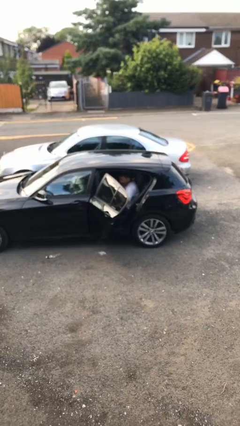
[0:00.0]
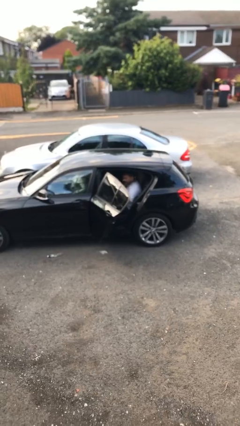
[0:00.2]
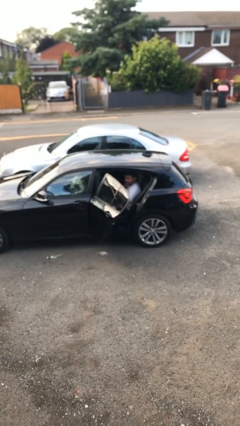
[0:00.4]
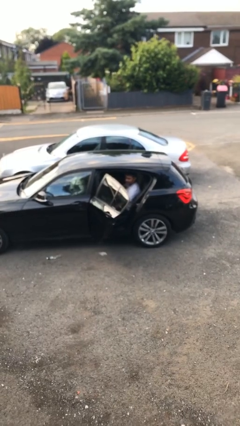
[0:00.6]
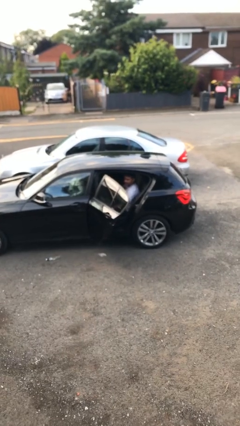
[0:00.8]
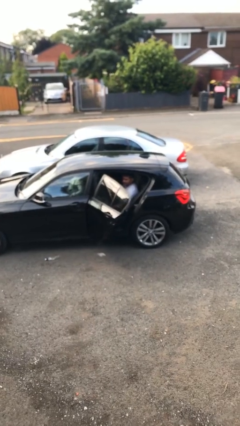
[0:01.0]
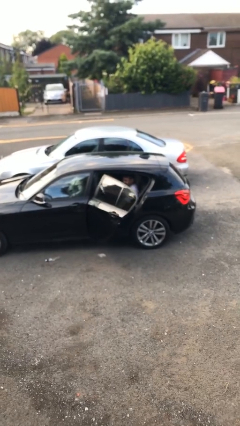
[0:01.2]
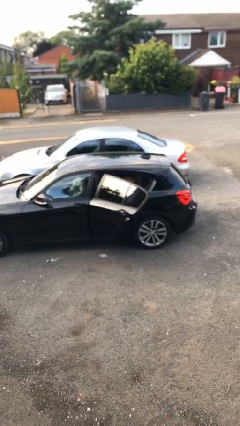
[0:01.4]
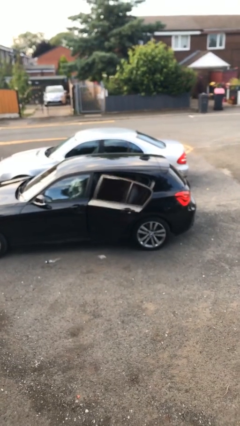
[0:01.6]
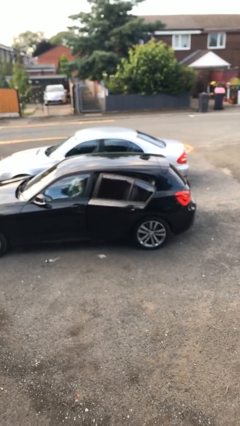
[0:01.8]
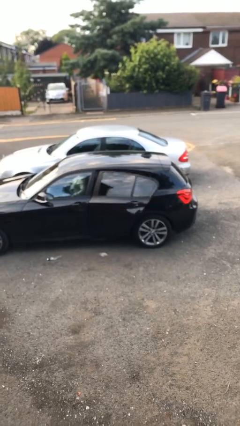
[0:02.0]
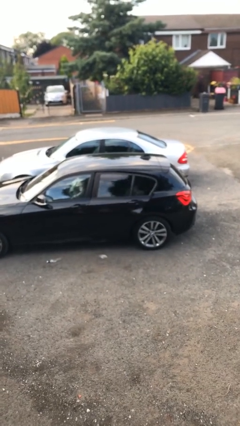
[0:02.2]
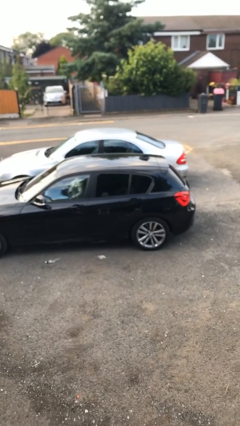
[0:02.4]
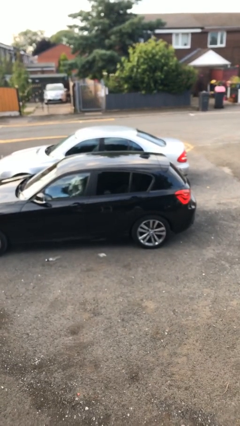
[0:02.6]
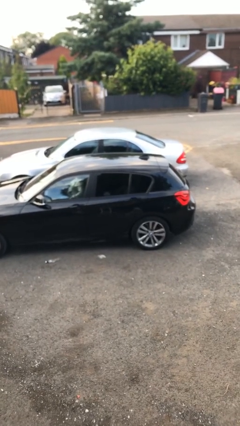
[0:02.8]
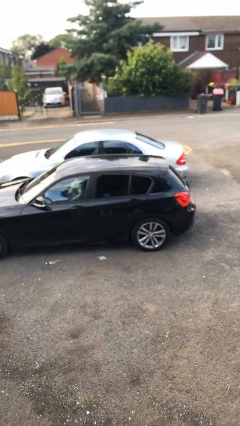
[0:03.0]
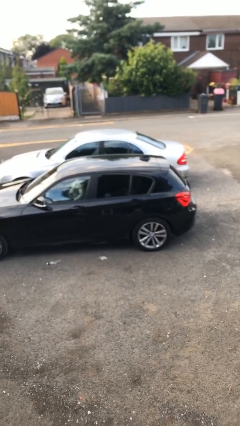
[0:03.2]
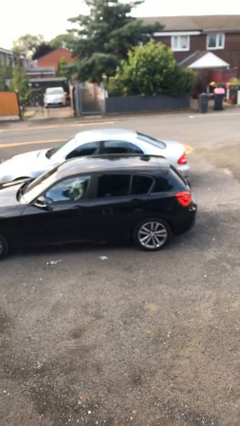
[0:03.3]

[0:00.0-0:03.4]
person closes car door

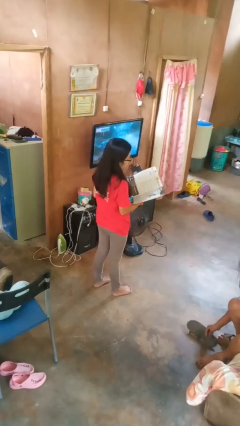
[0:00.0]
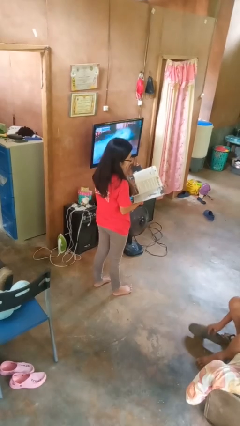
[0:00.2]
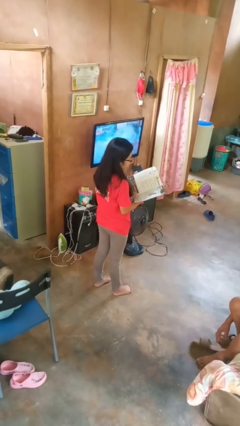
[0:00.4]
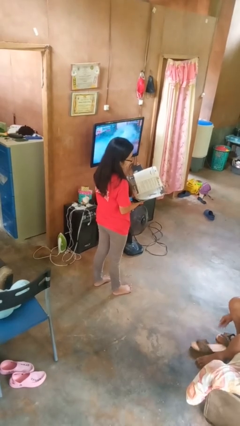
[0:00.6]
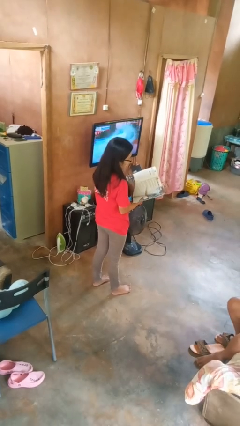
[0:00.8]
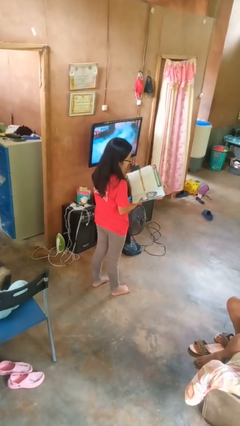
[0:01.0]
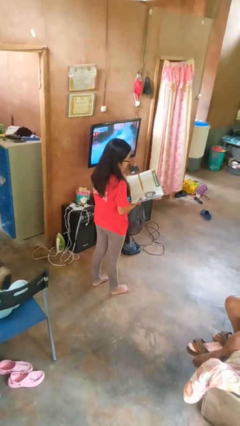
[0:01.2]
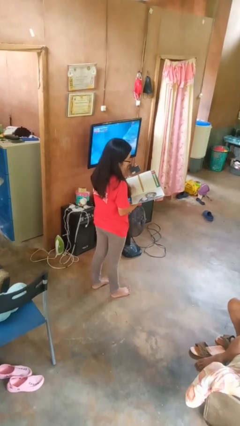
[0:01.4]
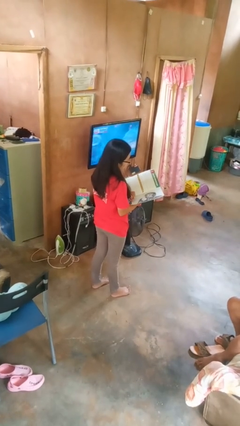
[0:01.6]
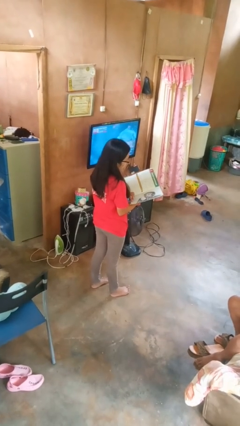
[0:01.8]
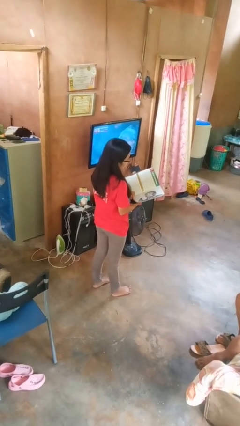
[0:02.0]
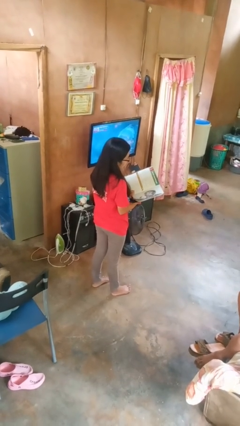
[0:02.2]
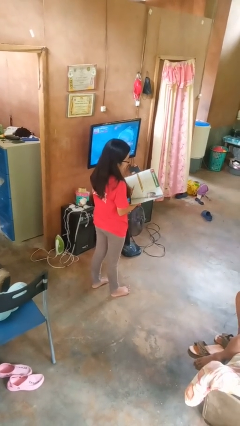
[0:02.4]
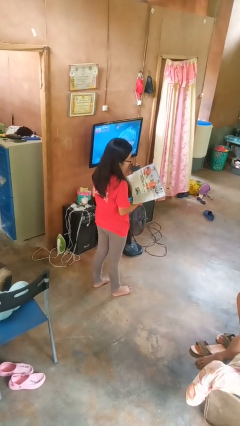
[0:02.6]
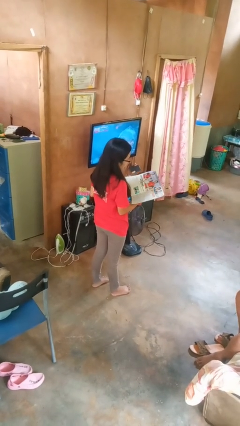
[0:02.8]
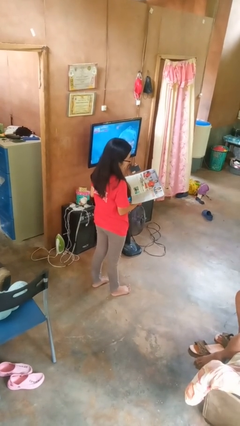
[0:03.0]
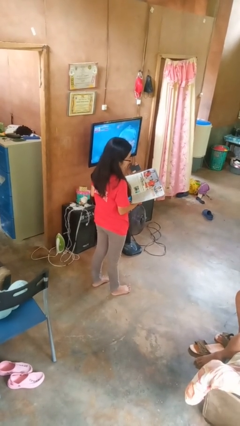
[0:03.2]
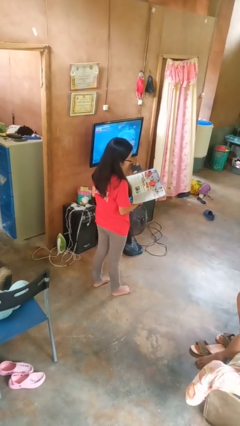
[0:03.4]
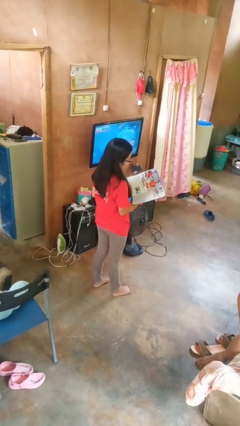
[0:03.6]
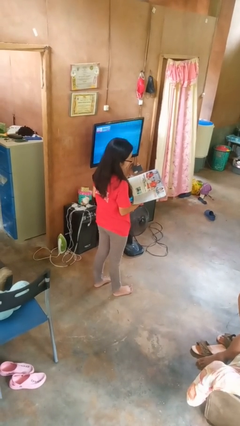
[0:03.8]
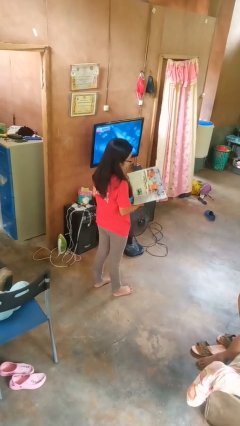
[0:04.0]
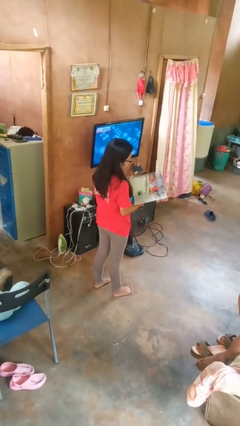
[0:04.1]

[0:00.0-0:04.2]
person reads magazine

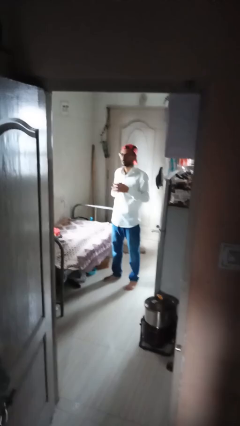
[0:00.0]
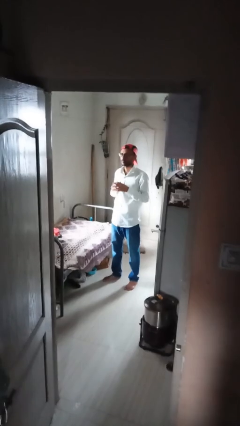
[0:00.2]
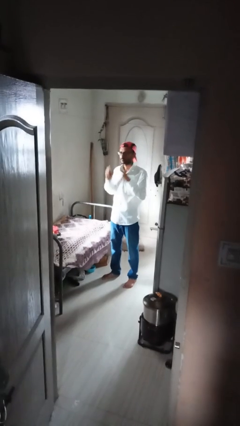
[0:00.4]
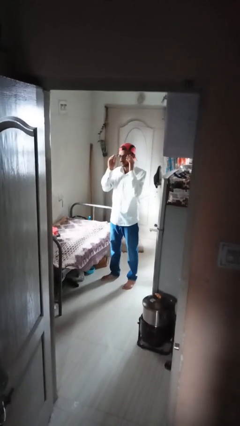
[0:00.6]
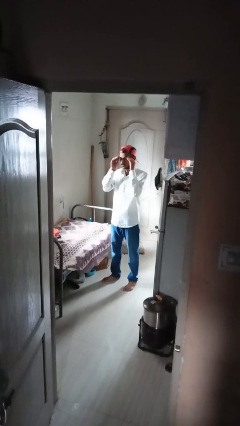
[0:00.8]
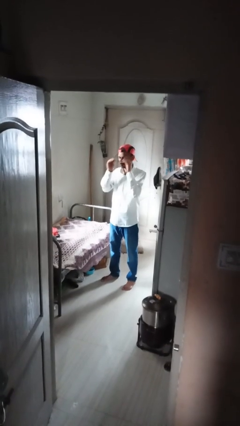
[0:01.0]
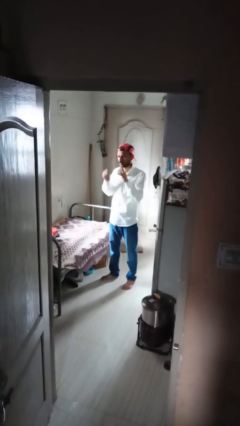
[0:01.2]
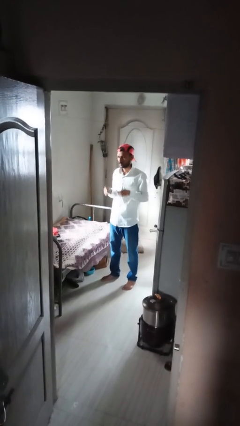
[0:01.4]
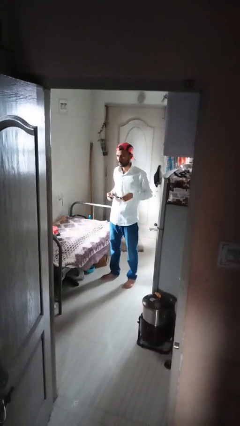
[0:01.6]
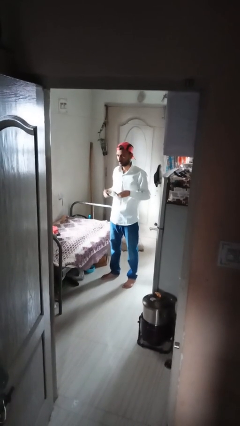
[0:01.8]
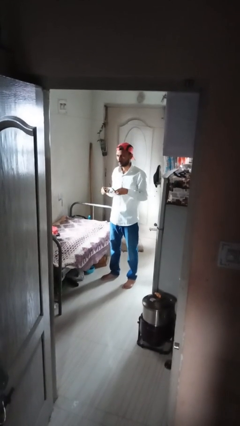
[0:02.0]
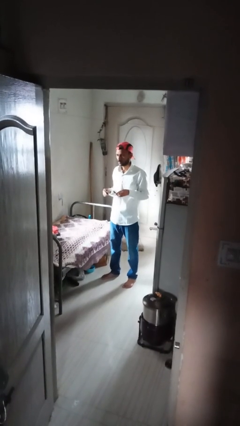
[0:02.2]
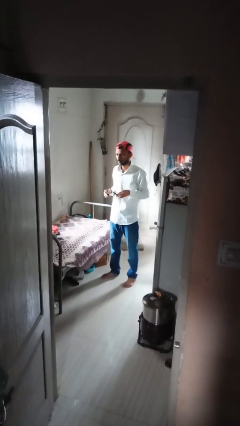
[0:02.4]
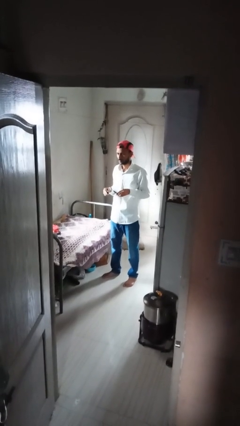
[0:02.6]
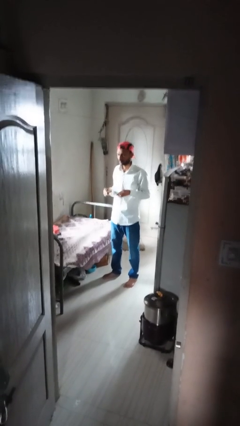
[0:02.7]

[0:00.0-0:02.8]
person takes off glasses

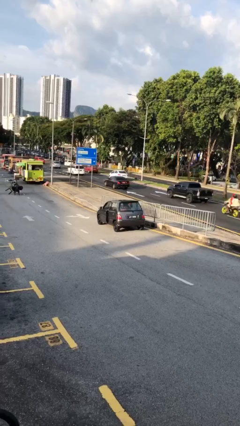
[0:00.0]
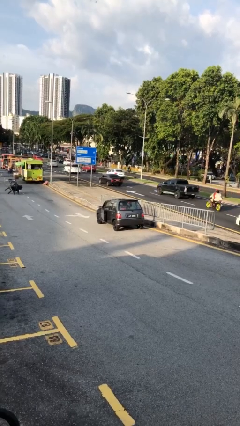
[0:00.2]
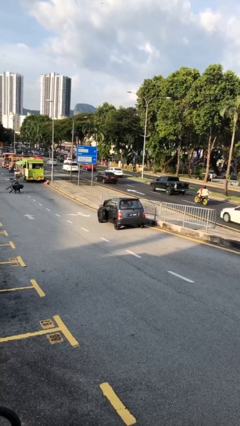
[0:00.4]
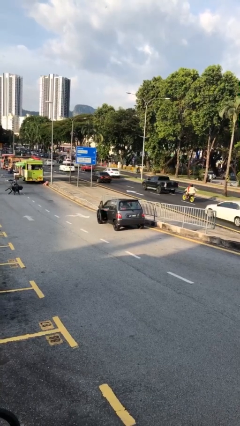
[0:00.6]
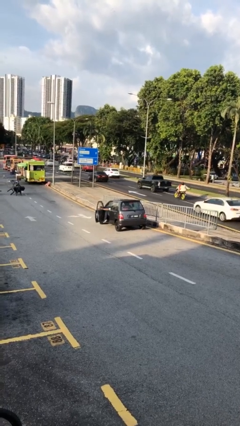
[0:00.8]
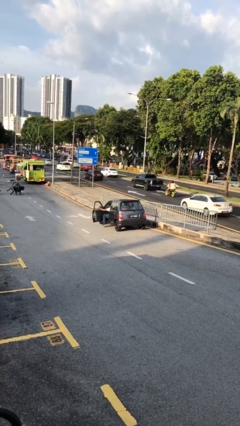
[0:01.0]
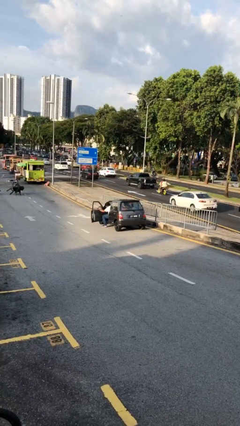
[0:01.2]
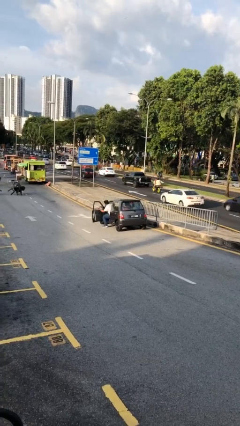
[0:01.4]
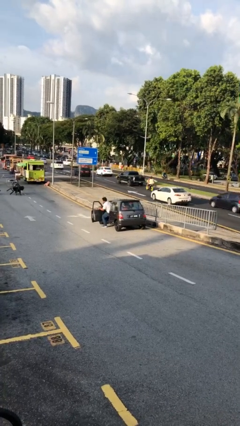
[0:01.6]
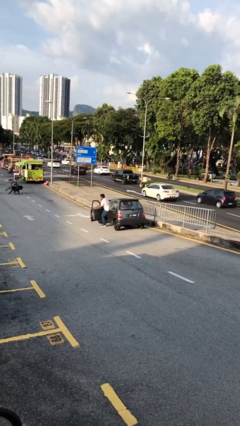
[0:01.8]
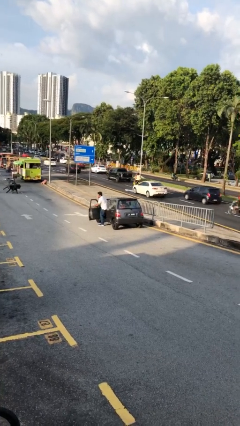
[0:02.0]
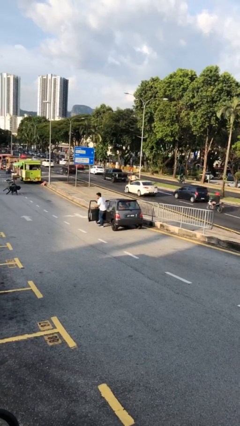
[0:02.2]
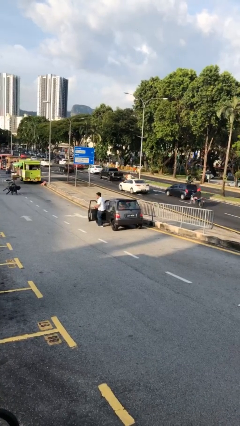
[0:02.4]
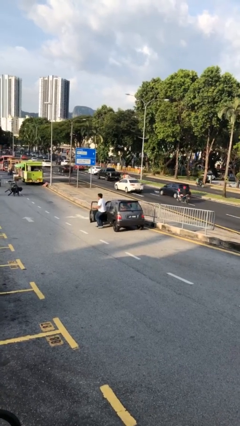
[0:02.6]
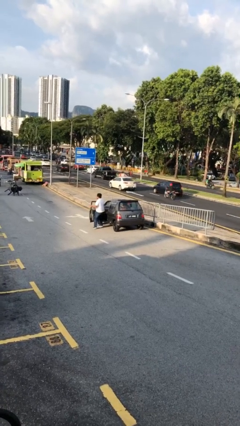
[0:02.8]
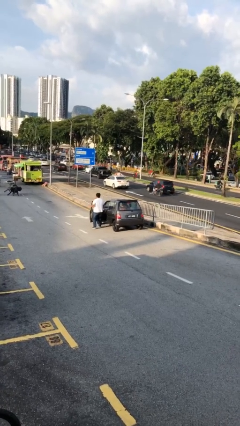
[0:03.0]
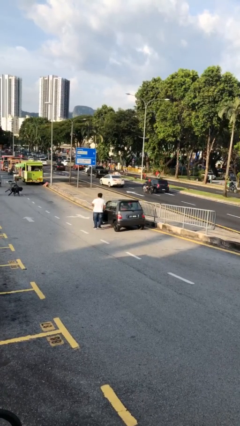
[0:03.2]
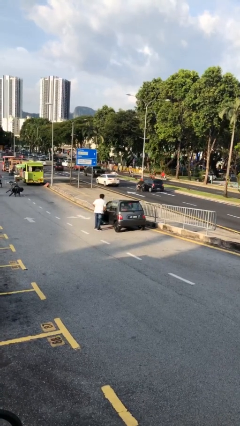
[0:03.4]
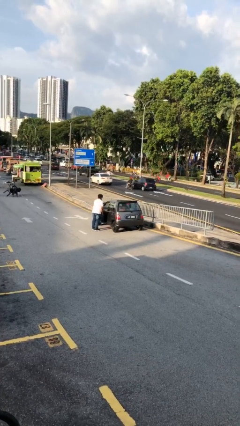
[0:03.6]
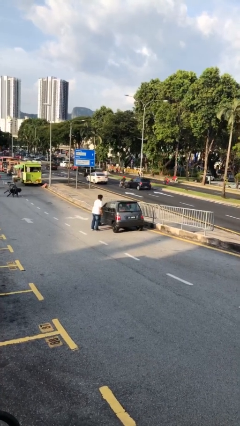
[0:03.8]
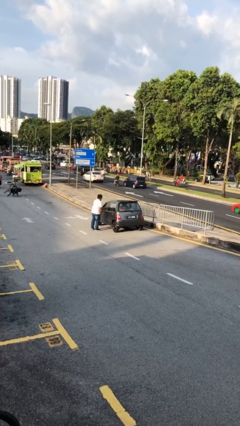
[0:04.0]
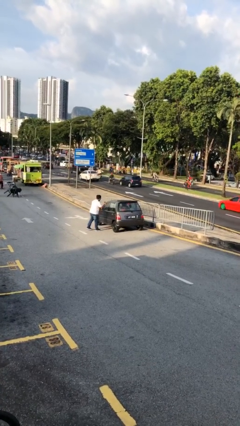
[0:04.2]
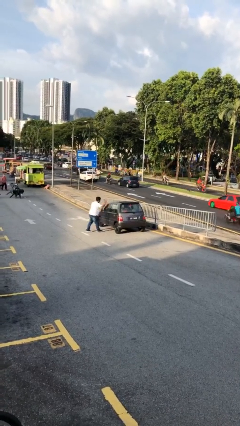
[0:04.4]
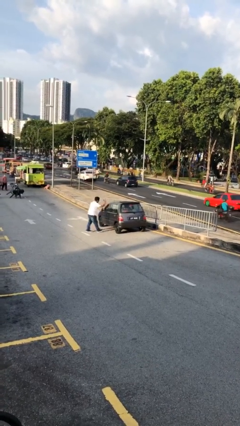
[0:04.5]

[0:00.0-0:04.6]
car drops off person

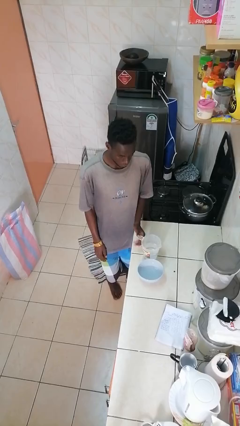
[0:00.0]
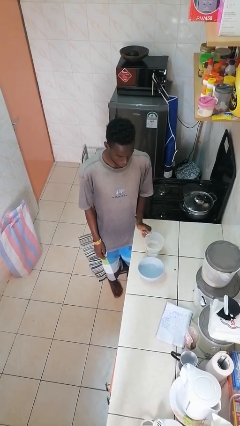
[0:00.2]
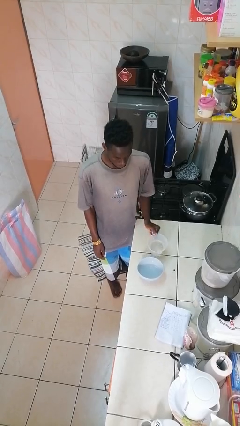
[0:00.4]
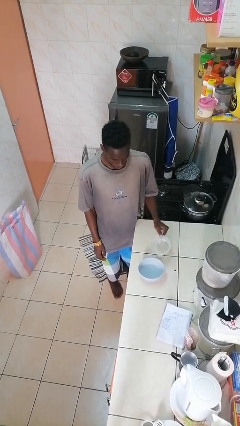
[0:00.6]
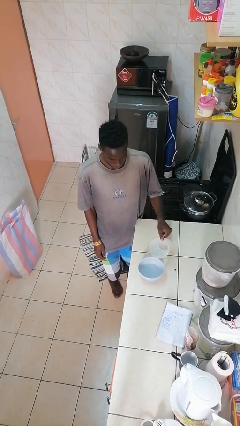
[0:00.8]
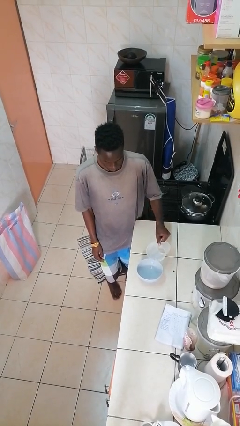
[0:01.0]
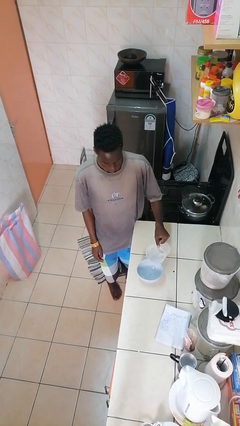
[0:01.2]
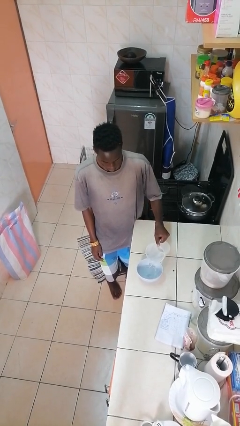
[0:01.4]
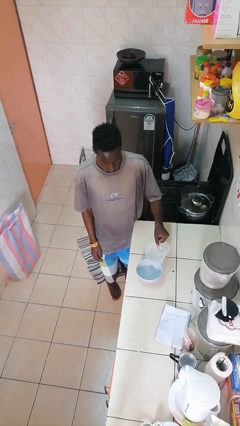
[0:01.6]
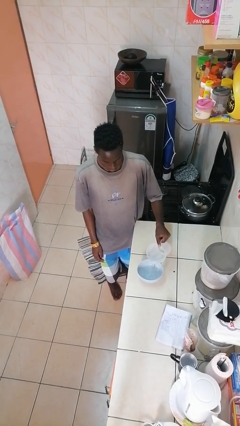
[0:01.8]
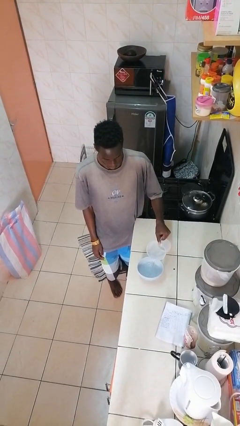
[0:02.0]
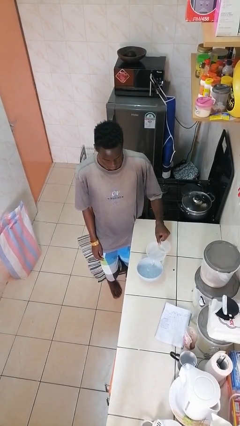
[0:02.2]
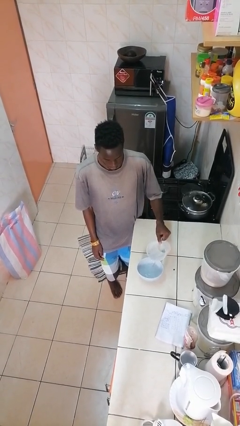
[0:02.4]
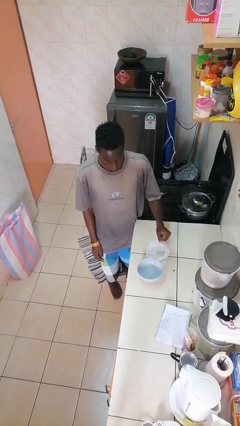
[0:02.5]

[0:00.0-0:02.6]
person pours into bowl
